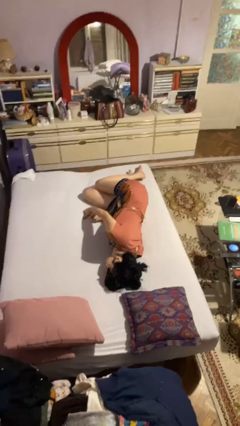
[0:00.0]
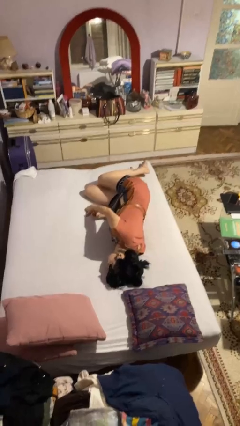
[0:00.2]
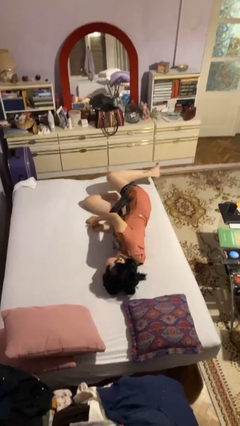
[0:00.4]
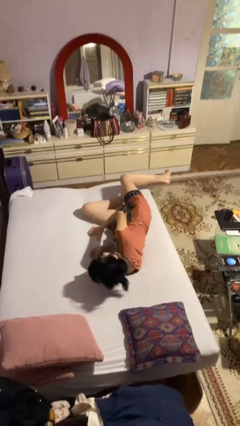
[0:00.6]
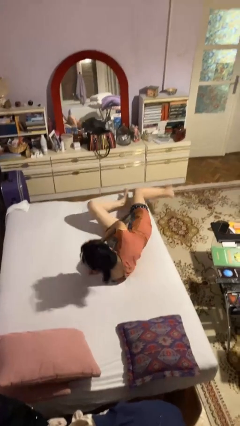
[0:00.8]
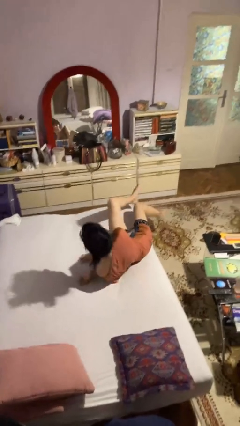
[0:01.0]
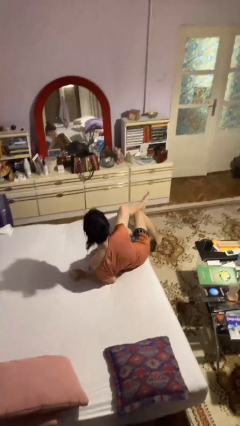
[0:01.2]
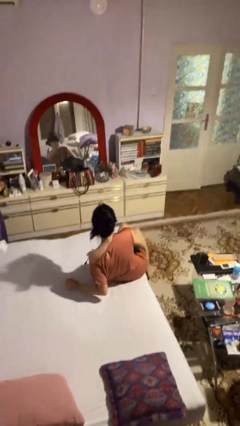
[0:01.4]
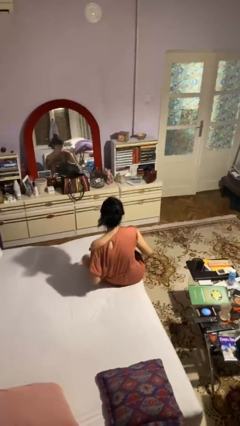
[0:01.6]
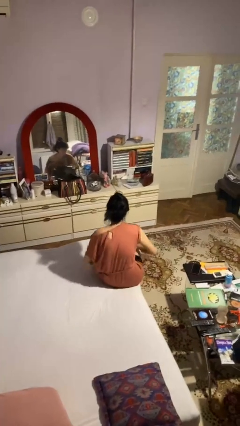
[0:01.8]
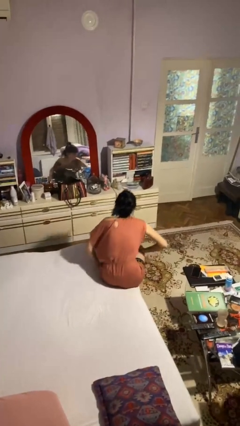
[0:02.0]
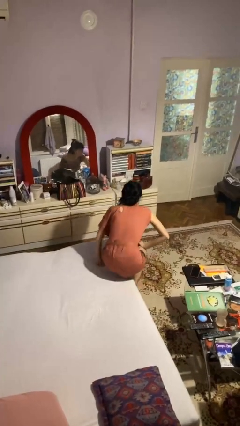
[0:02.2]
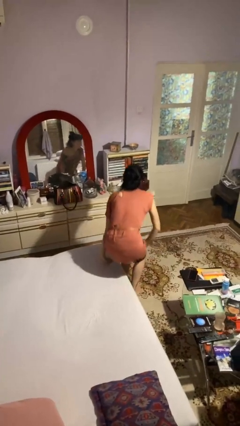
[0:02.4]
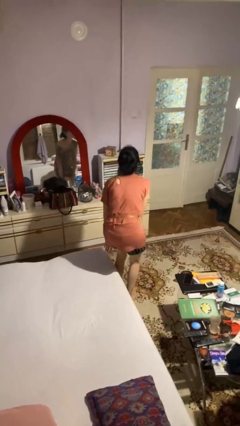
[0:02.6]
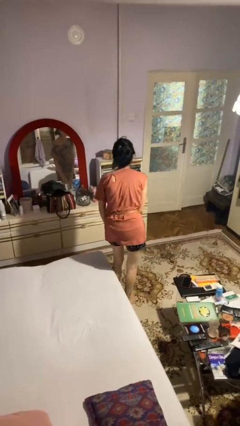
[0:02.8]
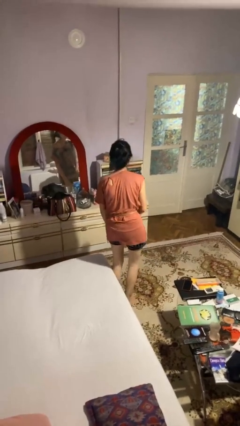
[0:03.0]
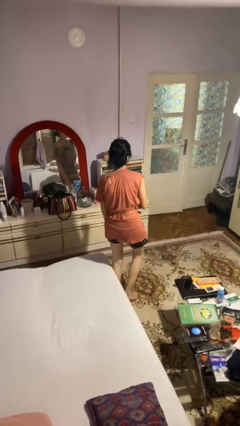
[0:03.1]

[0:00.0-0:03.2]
person stands up

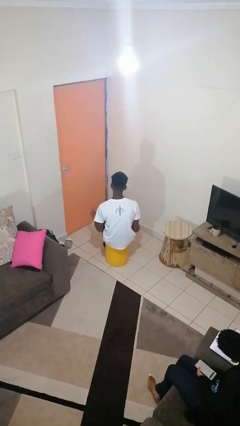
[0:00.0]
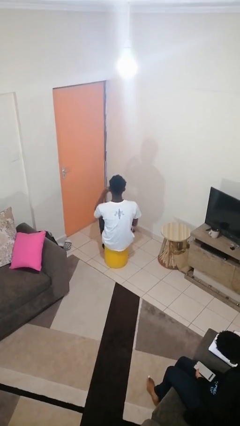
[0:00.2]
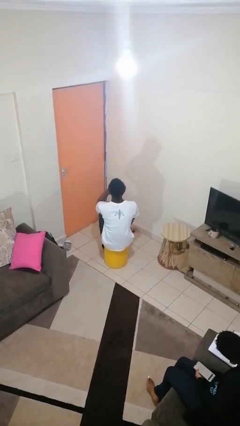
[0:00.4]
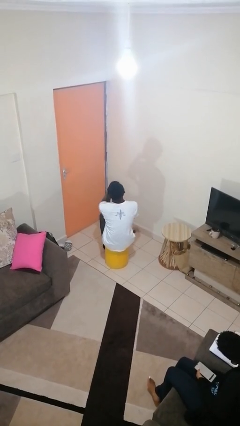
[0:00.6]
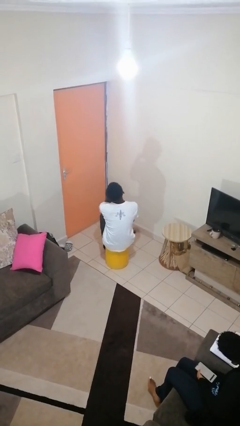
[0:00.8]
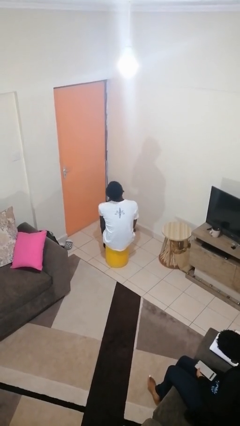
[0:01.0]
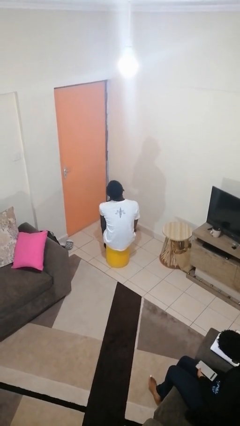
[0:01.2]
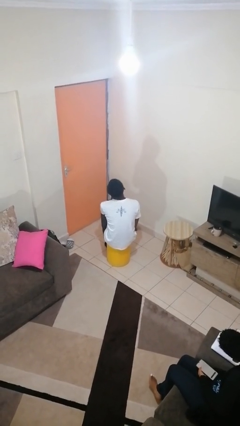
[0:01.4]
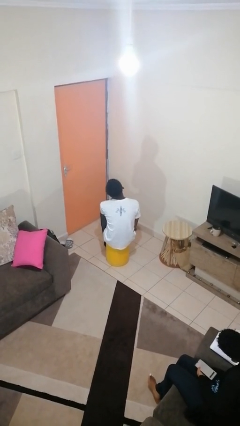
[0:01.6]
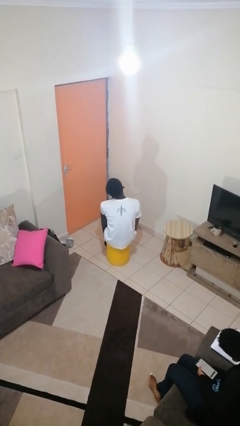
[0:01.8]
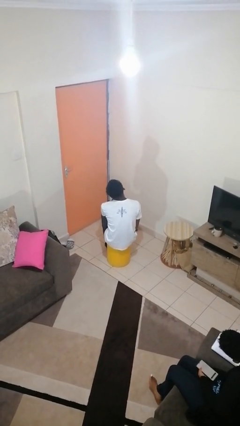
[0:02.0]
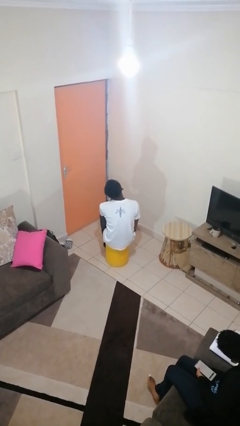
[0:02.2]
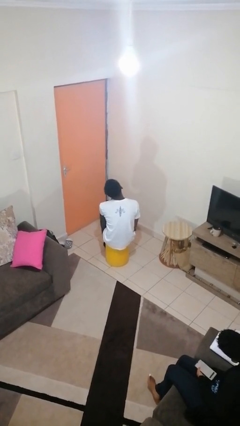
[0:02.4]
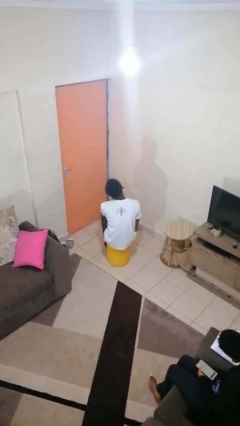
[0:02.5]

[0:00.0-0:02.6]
person strokes chin

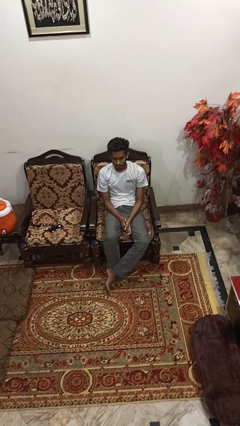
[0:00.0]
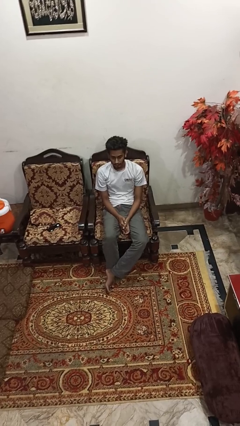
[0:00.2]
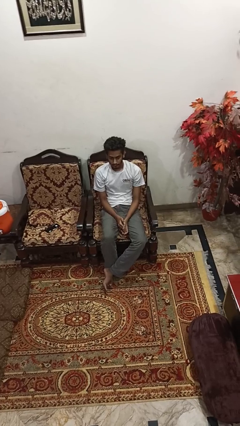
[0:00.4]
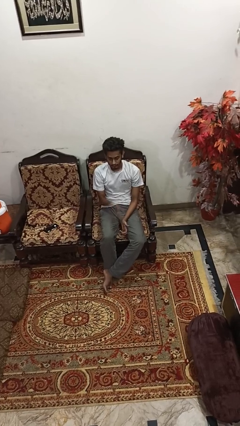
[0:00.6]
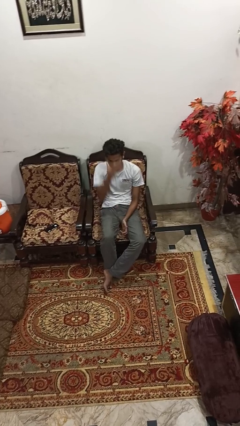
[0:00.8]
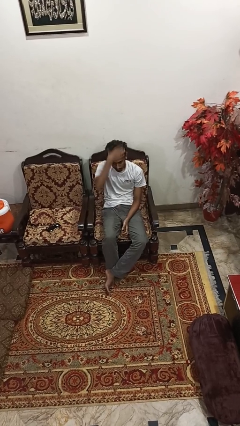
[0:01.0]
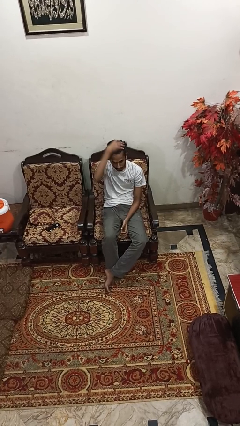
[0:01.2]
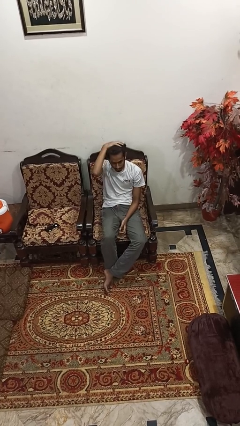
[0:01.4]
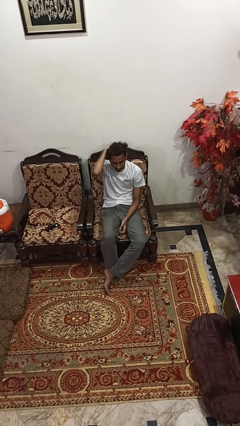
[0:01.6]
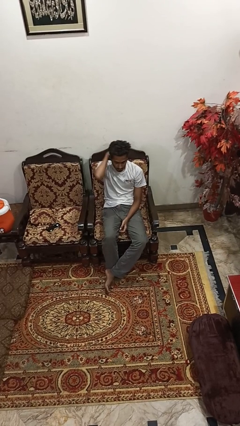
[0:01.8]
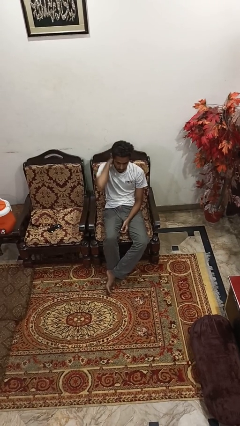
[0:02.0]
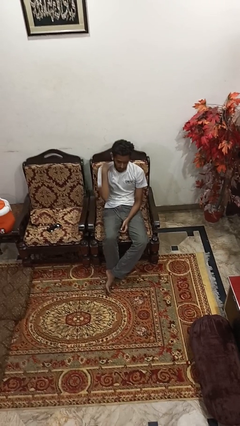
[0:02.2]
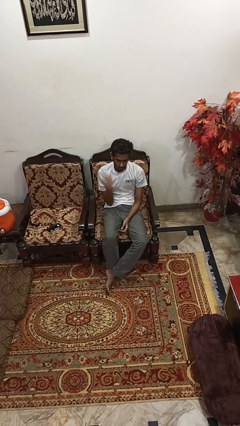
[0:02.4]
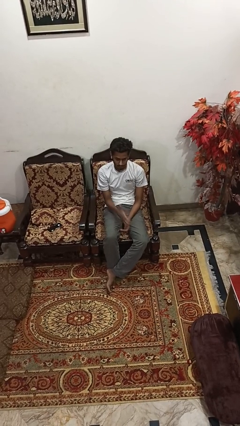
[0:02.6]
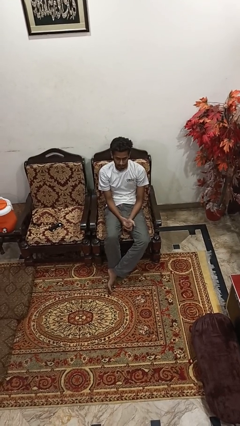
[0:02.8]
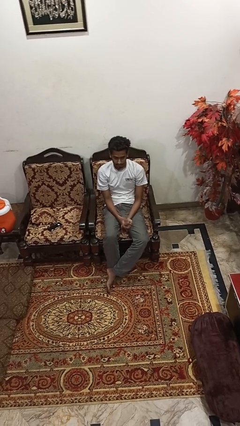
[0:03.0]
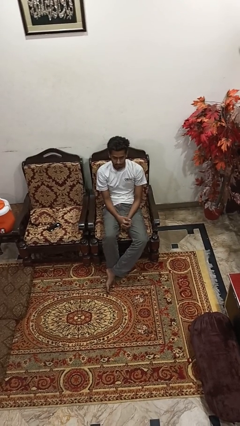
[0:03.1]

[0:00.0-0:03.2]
person strokes hair

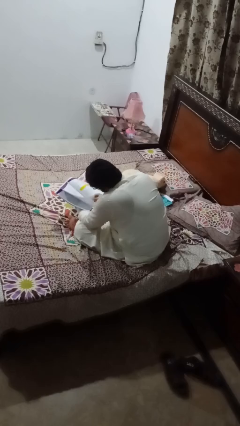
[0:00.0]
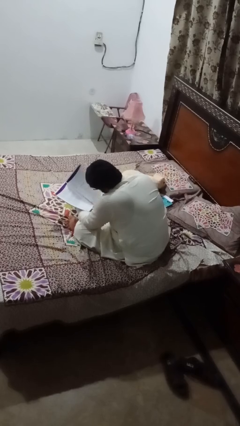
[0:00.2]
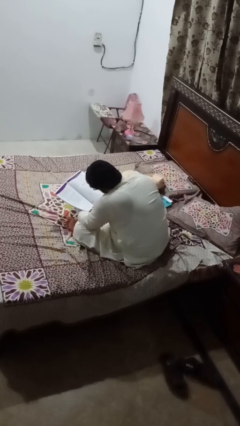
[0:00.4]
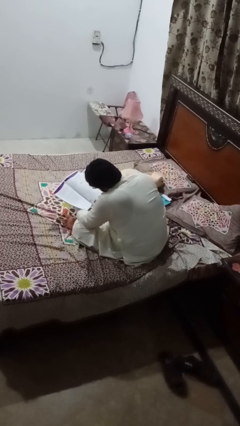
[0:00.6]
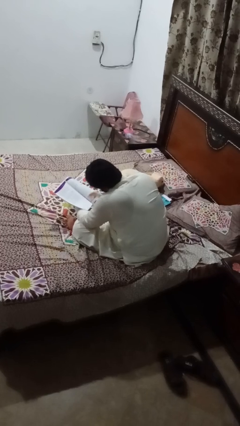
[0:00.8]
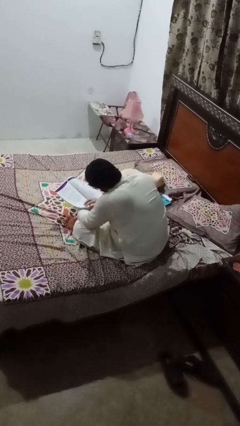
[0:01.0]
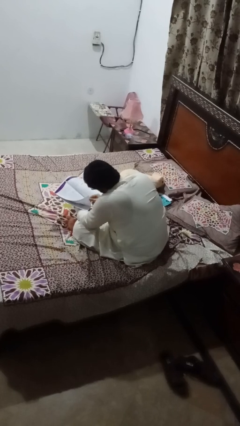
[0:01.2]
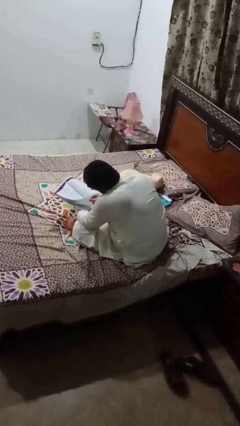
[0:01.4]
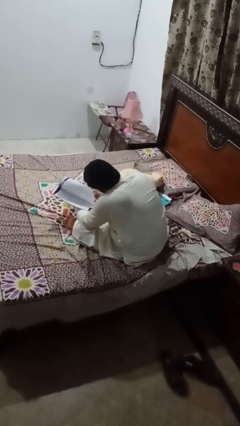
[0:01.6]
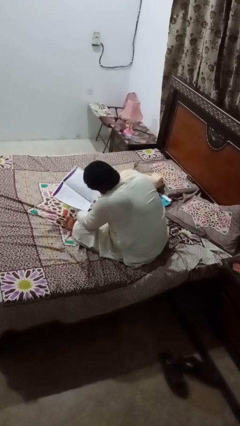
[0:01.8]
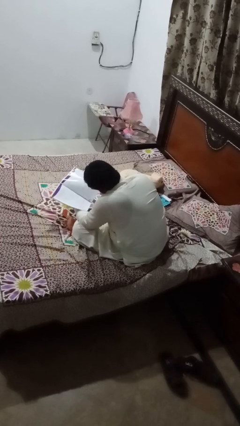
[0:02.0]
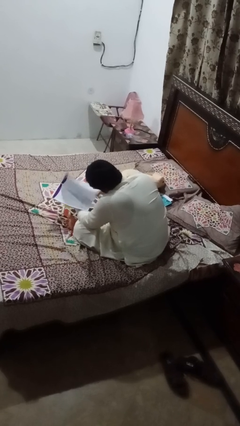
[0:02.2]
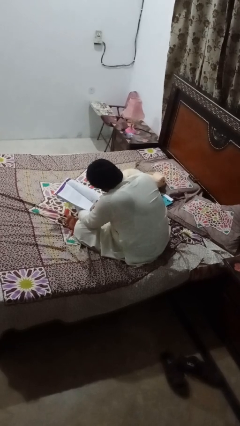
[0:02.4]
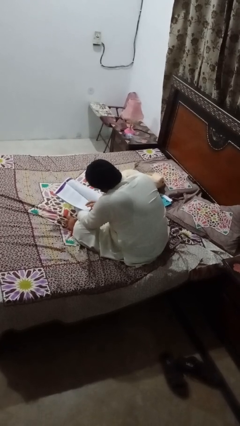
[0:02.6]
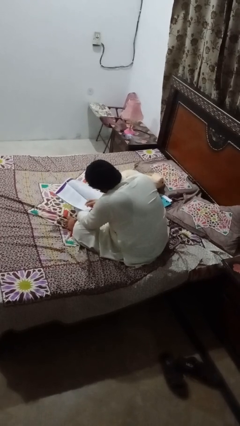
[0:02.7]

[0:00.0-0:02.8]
person reads book

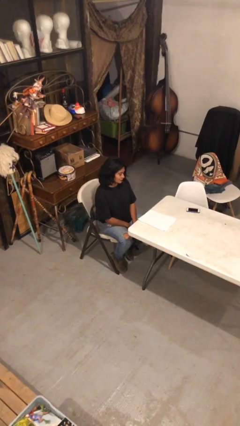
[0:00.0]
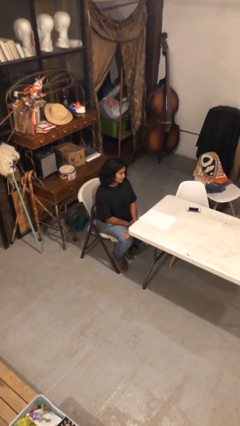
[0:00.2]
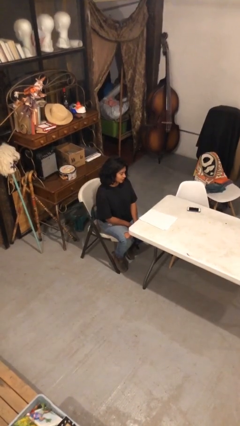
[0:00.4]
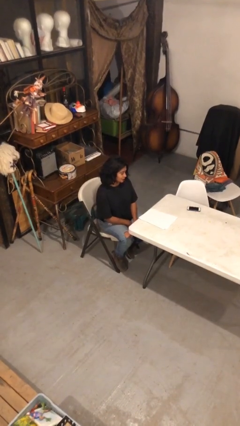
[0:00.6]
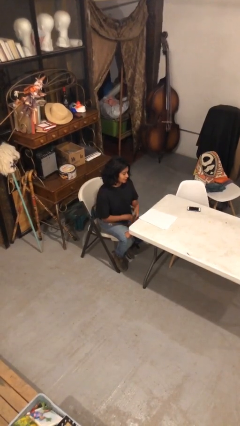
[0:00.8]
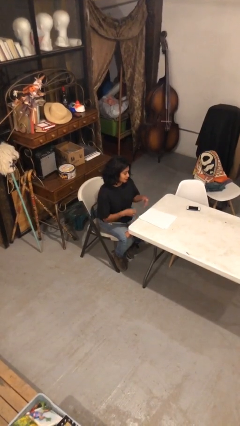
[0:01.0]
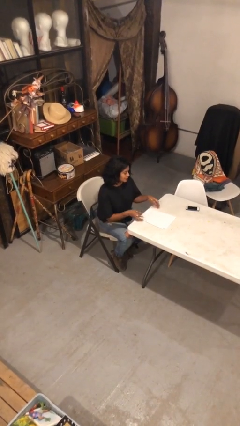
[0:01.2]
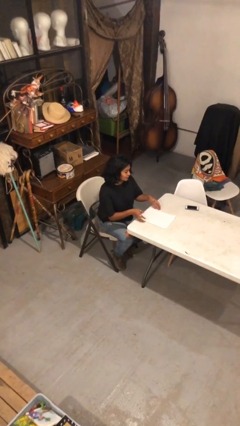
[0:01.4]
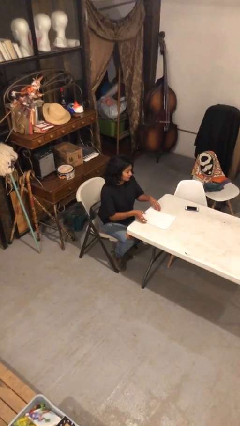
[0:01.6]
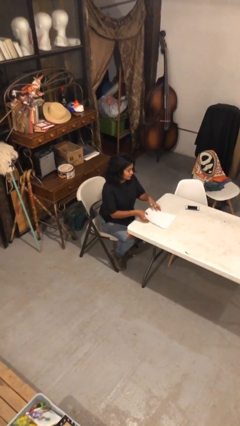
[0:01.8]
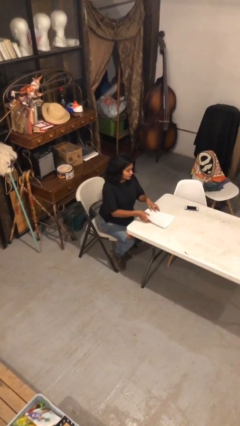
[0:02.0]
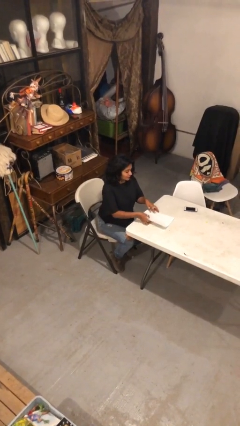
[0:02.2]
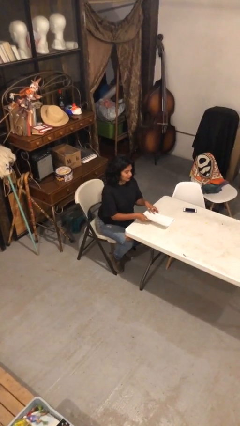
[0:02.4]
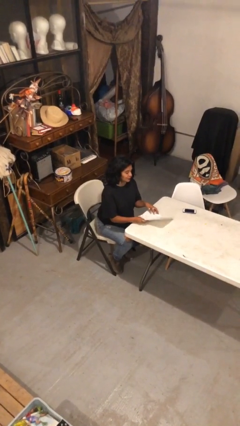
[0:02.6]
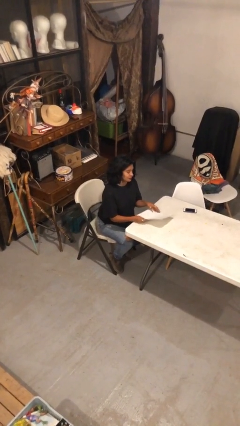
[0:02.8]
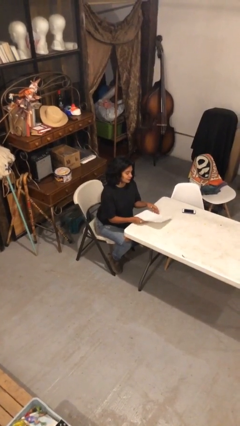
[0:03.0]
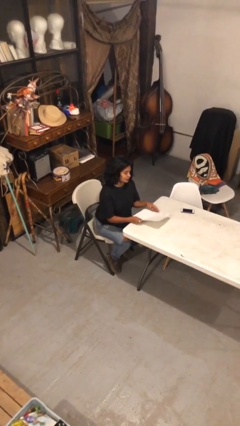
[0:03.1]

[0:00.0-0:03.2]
person picks up object from table

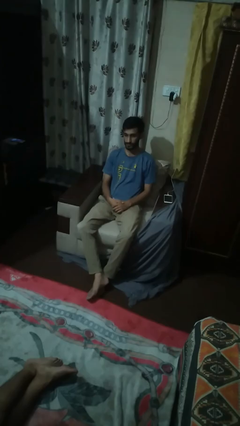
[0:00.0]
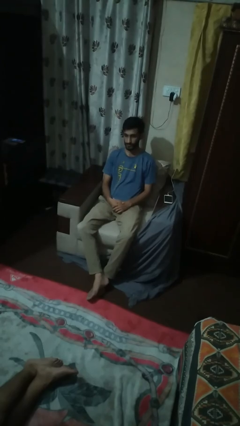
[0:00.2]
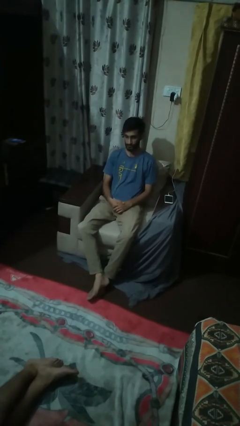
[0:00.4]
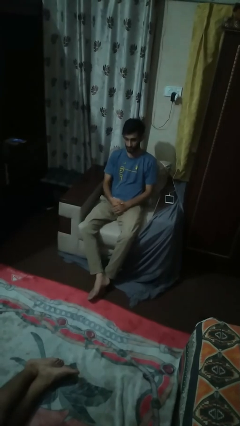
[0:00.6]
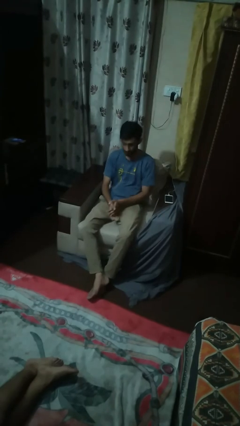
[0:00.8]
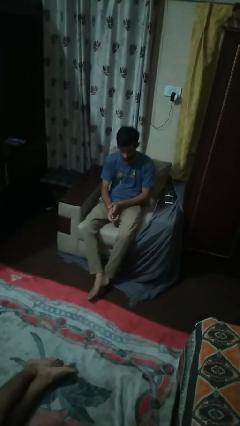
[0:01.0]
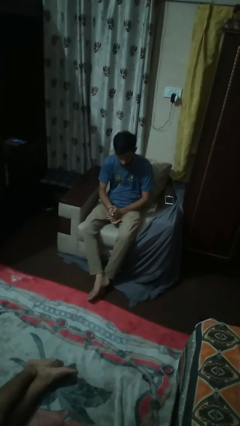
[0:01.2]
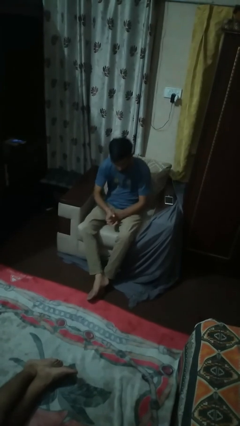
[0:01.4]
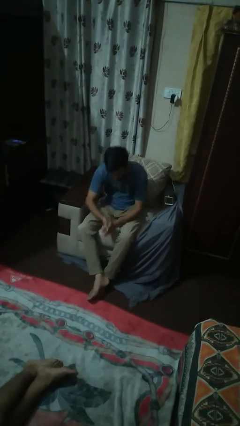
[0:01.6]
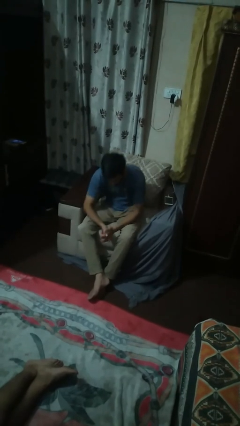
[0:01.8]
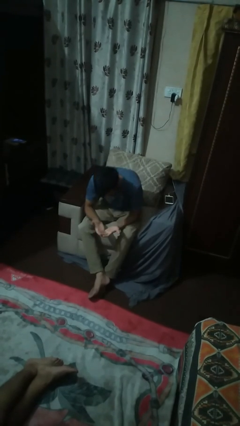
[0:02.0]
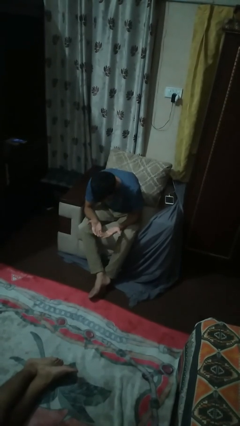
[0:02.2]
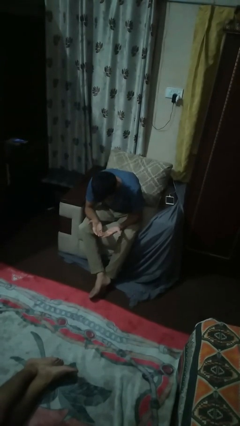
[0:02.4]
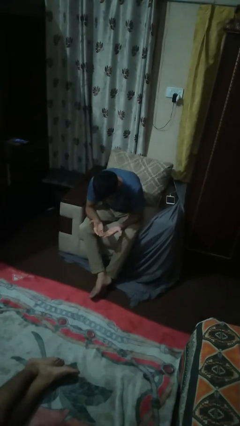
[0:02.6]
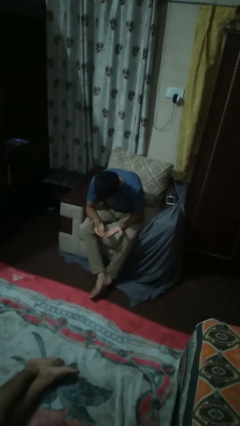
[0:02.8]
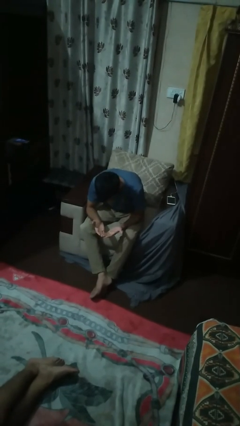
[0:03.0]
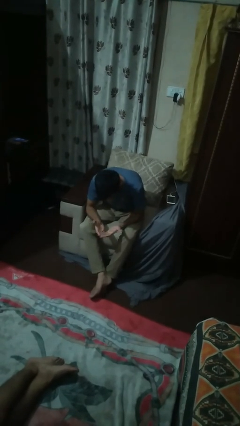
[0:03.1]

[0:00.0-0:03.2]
person looks at hands in lap
